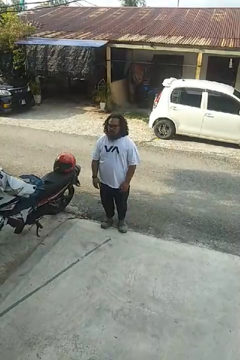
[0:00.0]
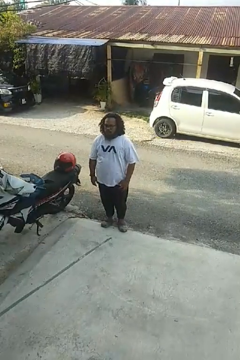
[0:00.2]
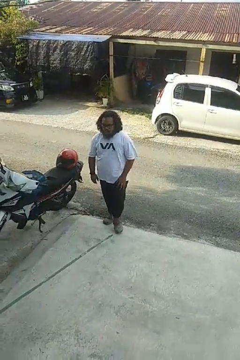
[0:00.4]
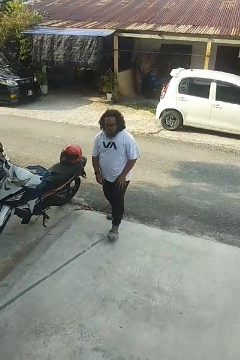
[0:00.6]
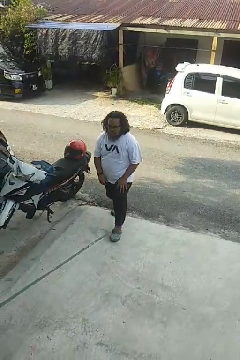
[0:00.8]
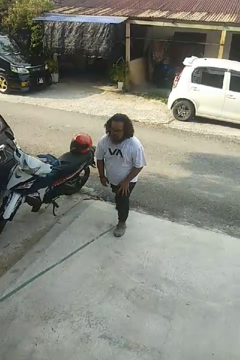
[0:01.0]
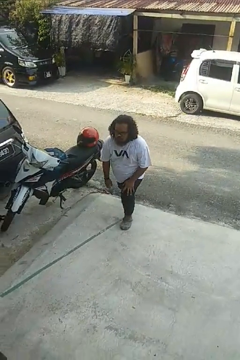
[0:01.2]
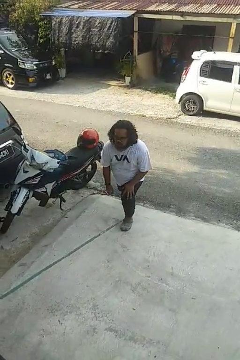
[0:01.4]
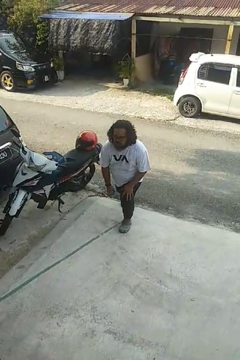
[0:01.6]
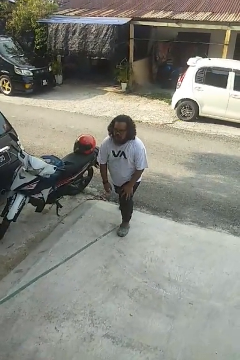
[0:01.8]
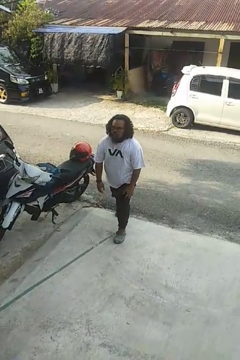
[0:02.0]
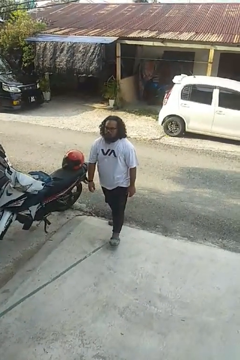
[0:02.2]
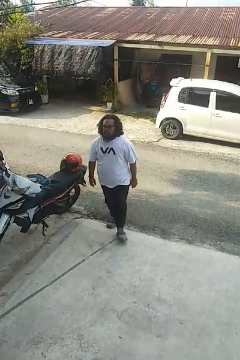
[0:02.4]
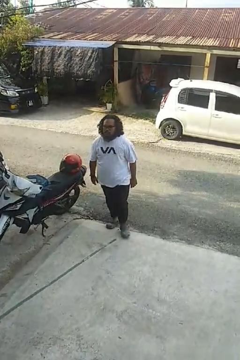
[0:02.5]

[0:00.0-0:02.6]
person exercises with lunges

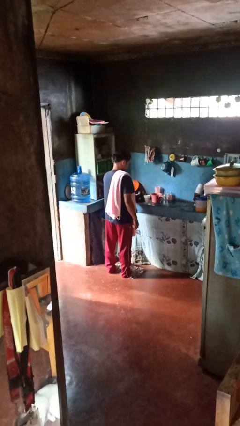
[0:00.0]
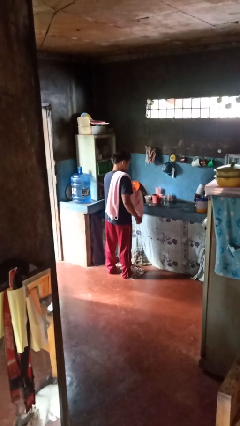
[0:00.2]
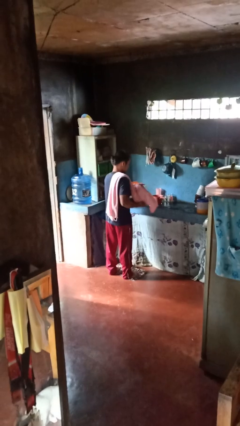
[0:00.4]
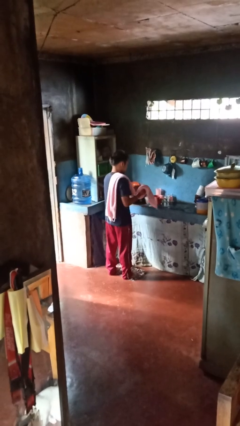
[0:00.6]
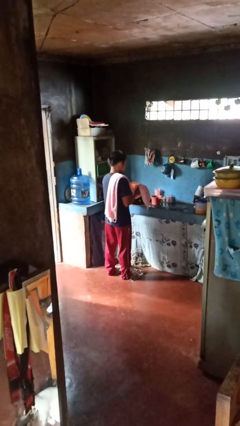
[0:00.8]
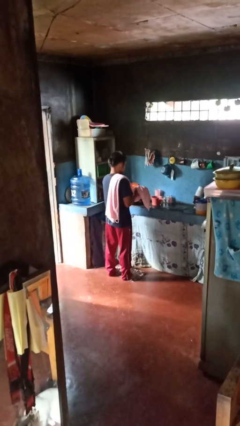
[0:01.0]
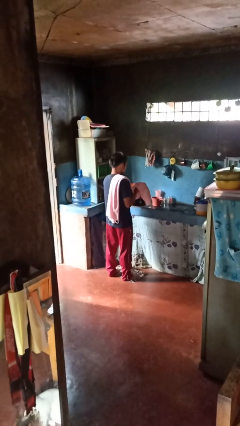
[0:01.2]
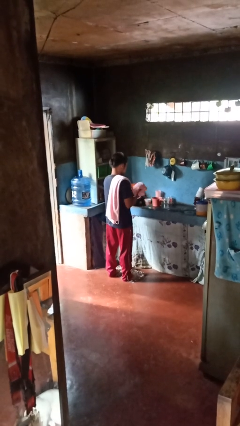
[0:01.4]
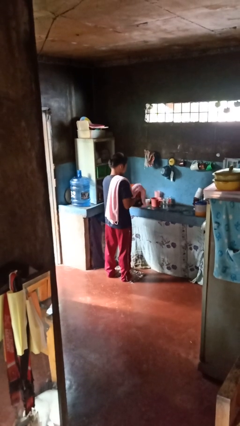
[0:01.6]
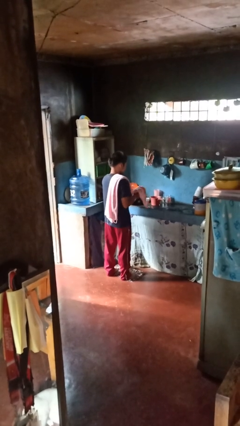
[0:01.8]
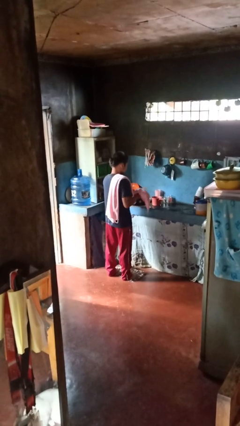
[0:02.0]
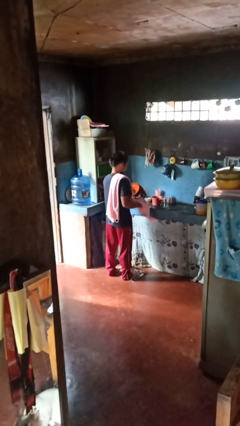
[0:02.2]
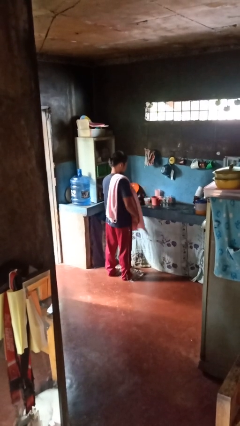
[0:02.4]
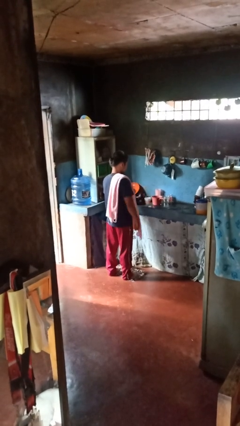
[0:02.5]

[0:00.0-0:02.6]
person dries hands with towel

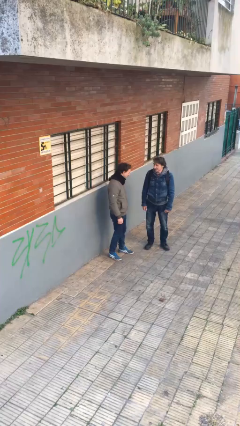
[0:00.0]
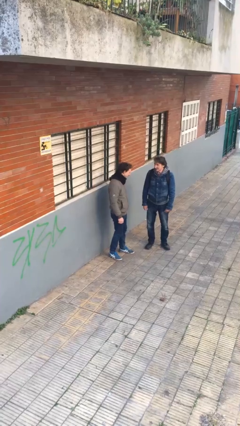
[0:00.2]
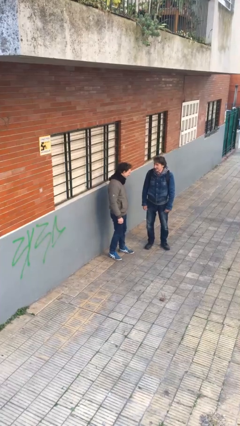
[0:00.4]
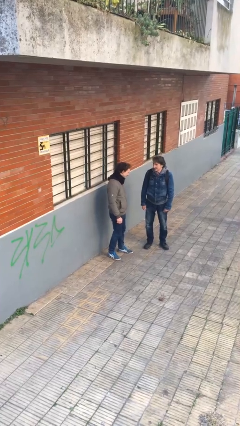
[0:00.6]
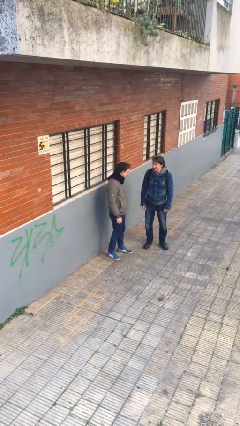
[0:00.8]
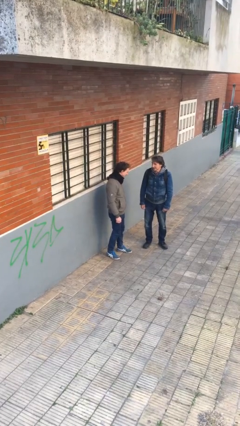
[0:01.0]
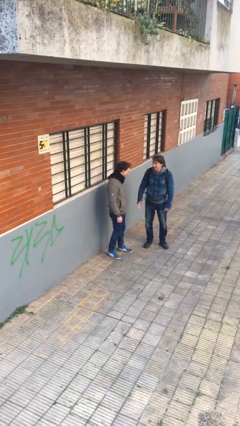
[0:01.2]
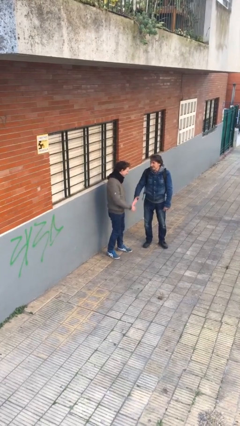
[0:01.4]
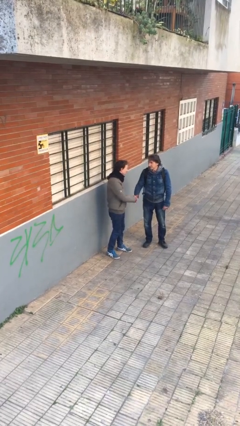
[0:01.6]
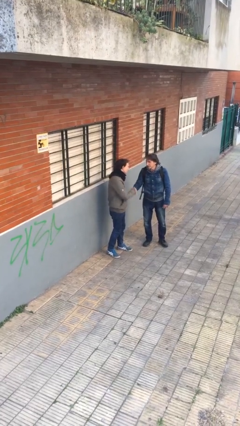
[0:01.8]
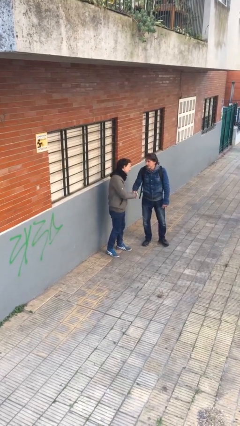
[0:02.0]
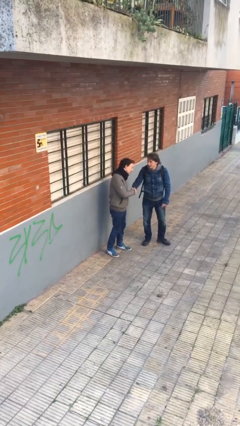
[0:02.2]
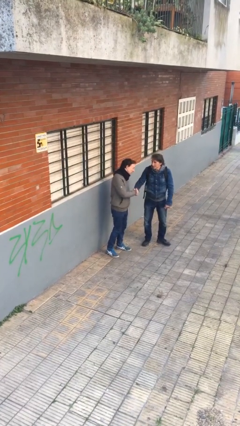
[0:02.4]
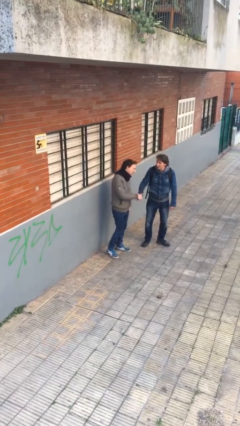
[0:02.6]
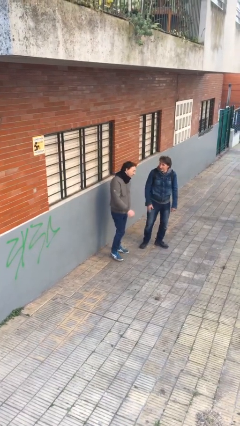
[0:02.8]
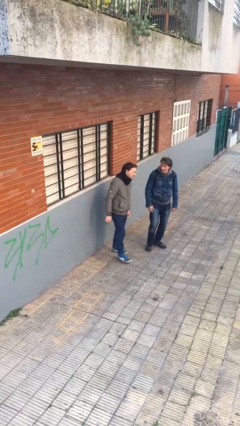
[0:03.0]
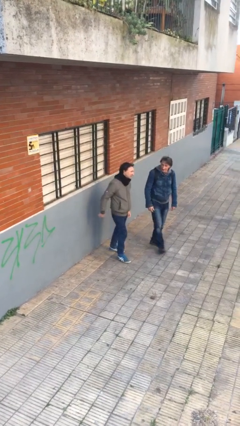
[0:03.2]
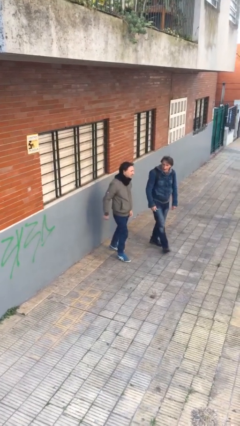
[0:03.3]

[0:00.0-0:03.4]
person shakes hand

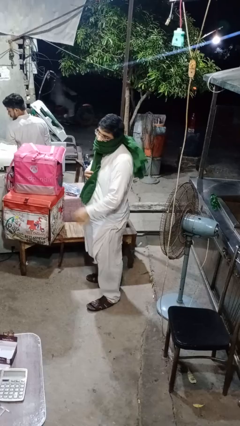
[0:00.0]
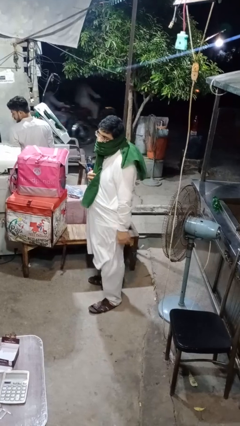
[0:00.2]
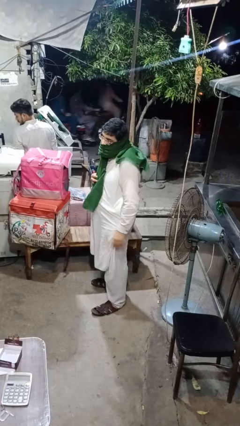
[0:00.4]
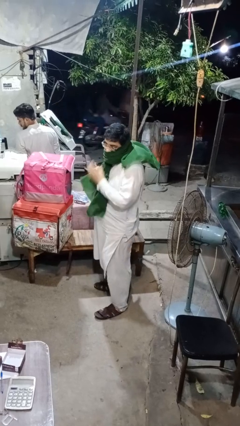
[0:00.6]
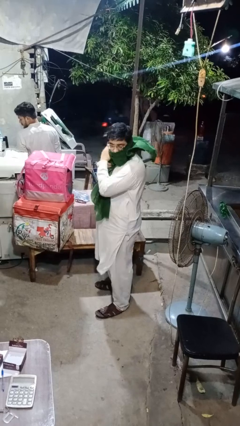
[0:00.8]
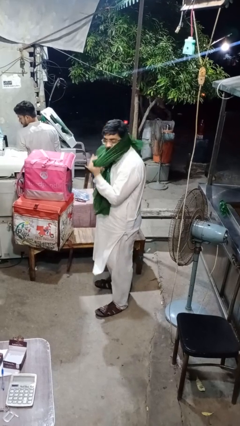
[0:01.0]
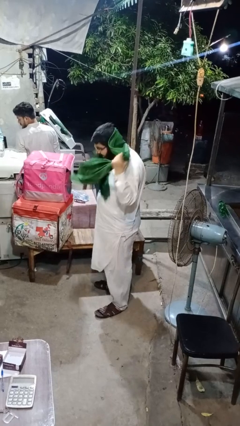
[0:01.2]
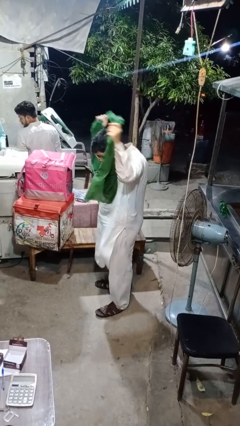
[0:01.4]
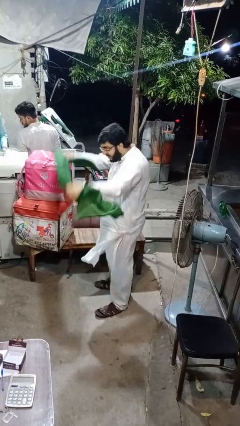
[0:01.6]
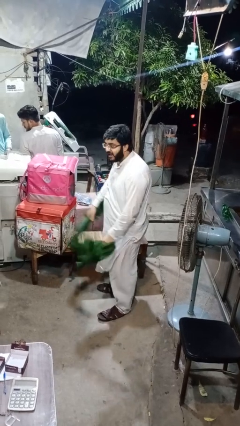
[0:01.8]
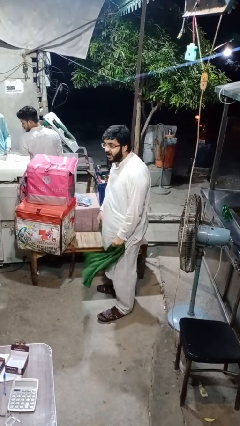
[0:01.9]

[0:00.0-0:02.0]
person takes off scarf

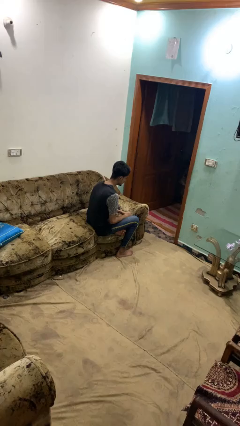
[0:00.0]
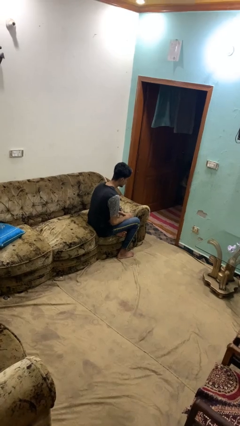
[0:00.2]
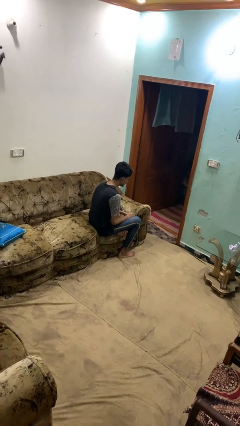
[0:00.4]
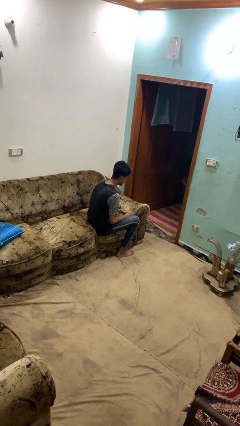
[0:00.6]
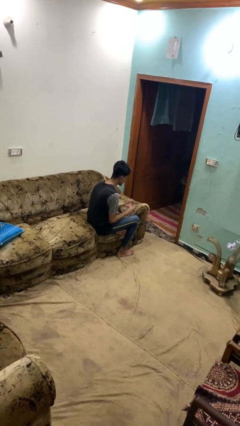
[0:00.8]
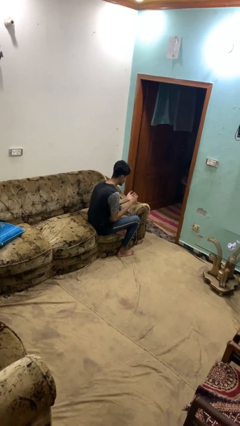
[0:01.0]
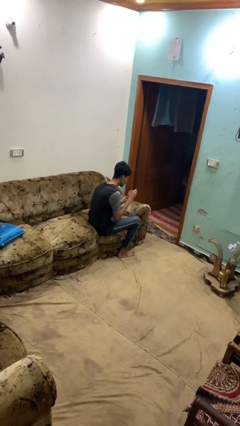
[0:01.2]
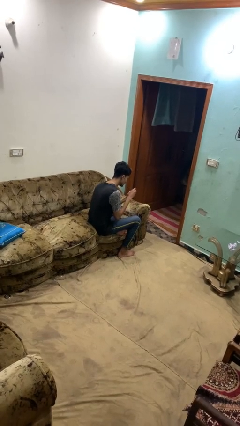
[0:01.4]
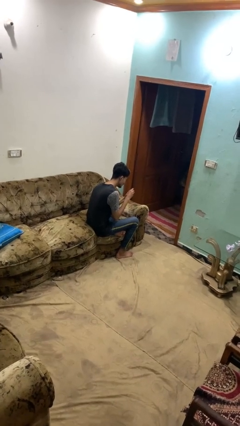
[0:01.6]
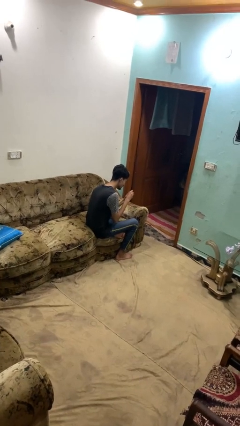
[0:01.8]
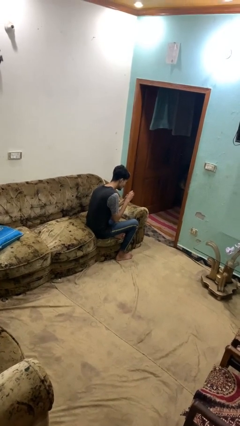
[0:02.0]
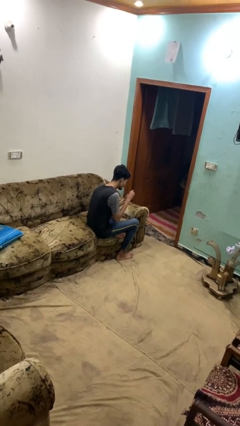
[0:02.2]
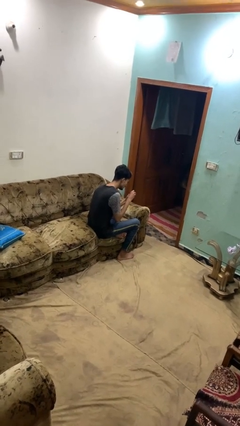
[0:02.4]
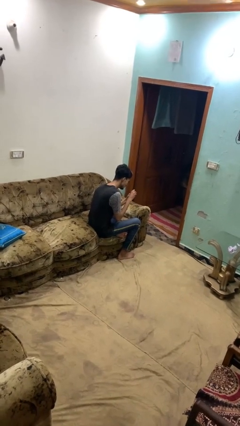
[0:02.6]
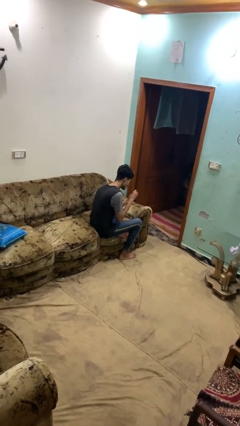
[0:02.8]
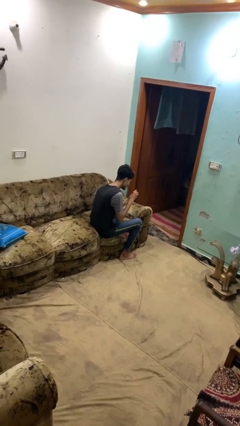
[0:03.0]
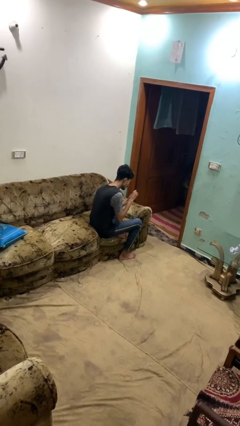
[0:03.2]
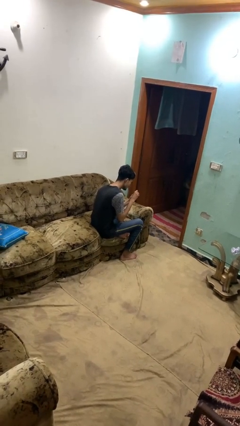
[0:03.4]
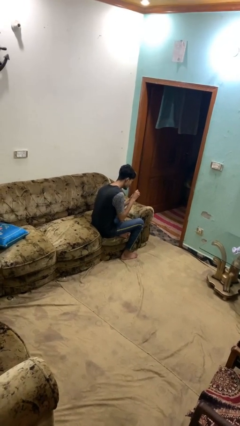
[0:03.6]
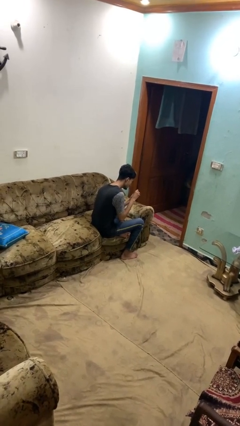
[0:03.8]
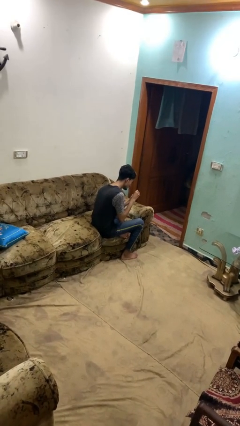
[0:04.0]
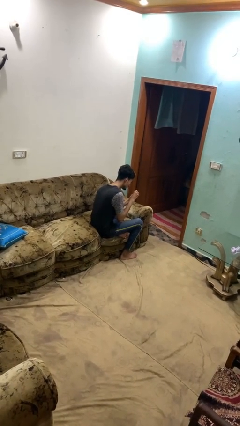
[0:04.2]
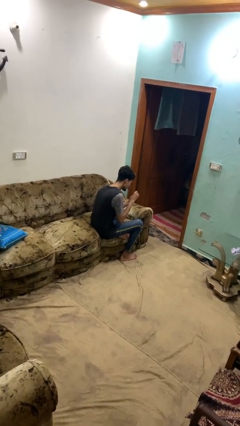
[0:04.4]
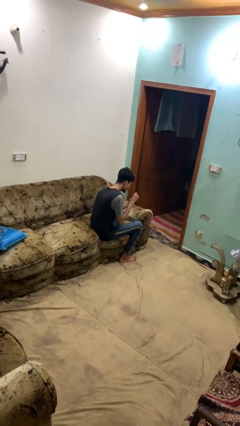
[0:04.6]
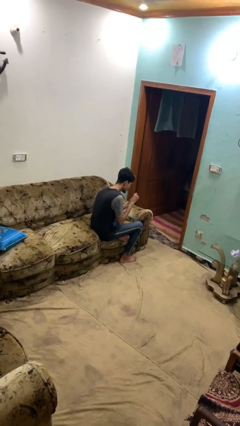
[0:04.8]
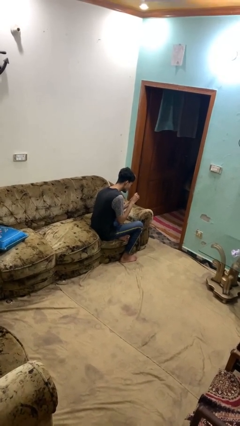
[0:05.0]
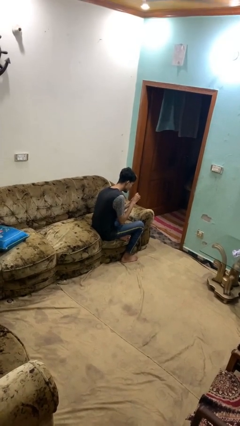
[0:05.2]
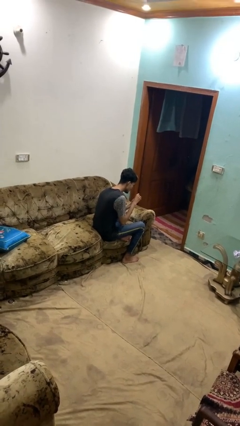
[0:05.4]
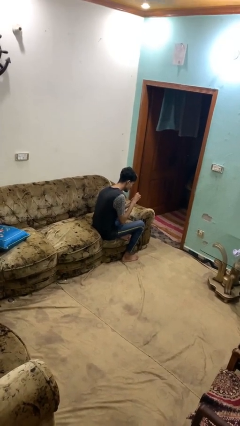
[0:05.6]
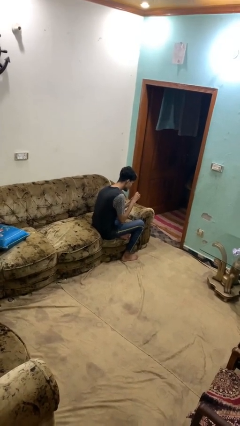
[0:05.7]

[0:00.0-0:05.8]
person clips fingernails

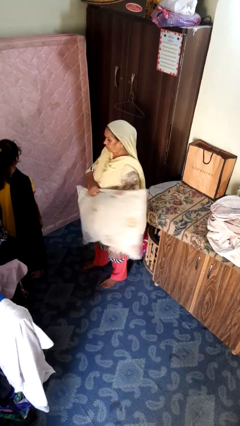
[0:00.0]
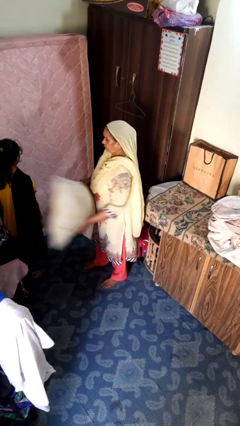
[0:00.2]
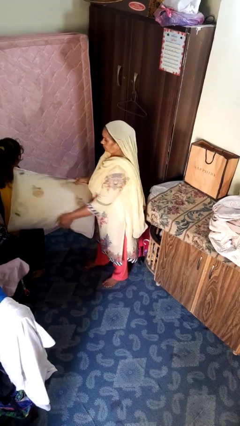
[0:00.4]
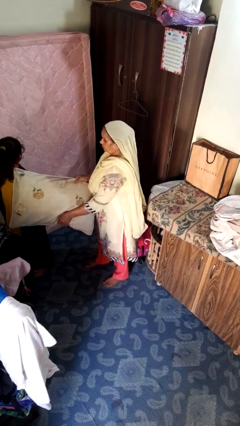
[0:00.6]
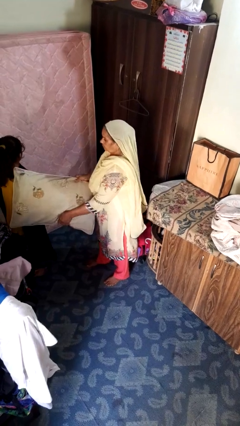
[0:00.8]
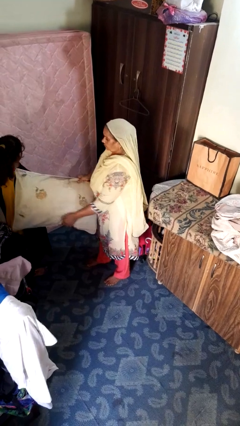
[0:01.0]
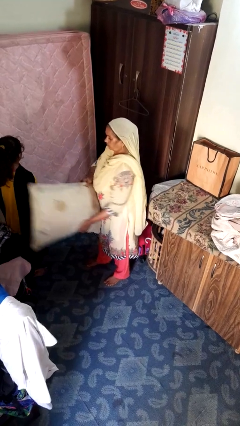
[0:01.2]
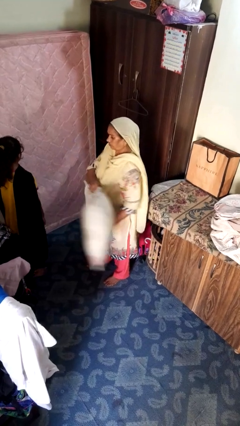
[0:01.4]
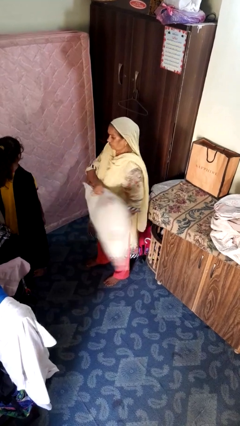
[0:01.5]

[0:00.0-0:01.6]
person hits person with pillow
